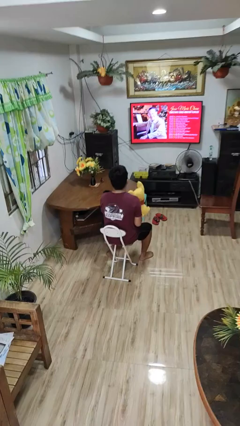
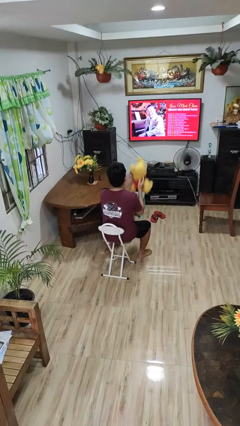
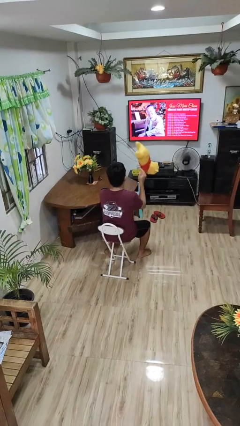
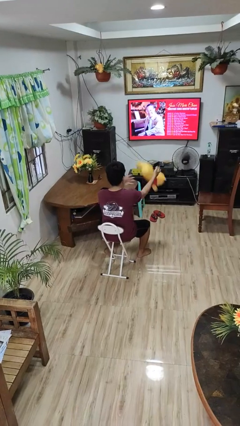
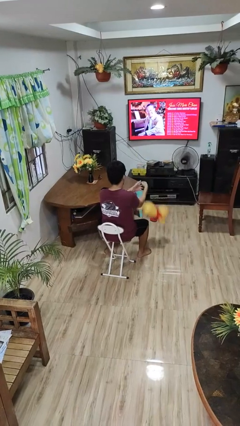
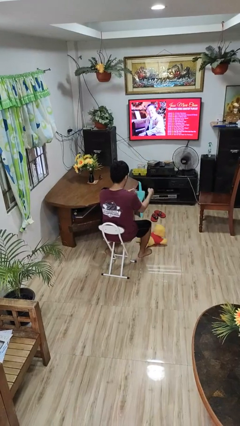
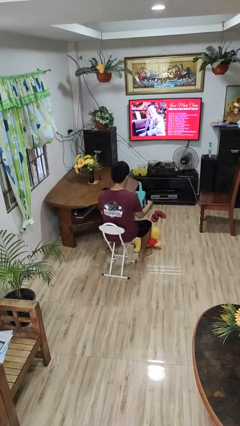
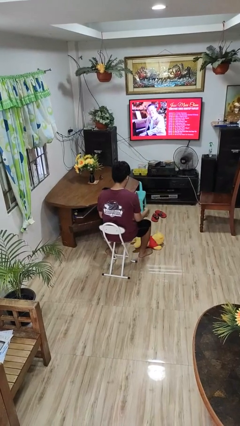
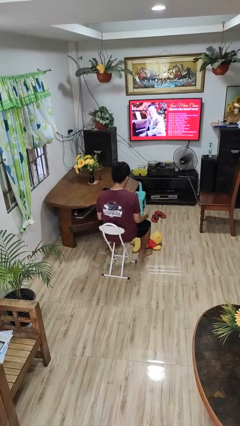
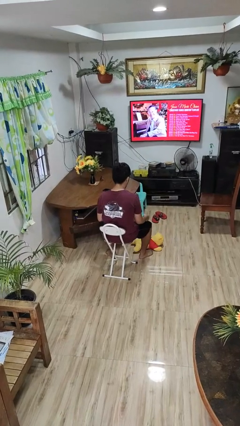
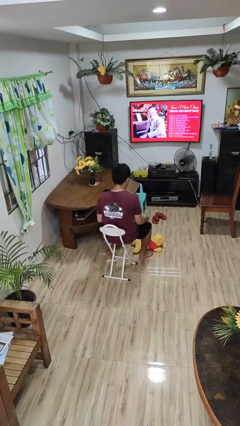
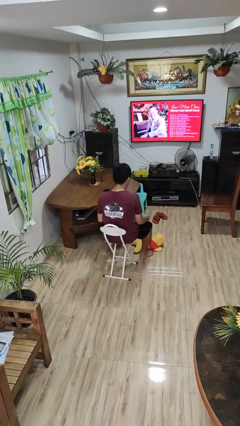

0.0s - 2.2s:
person drops object

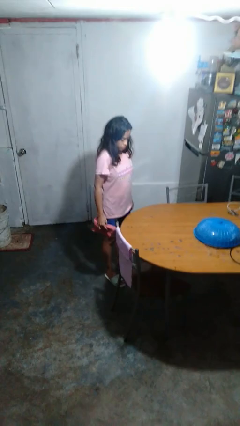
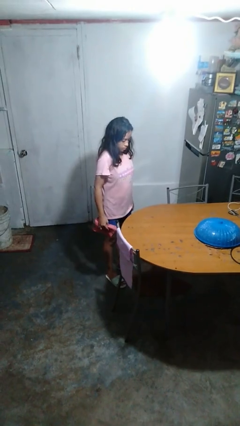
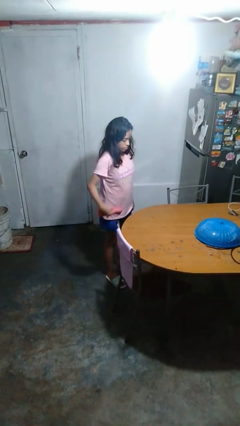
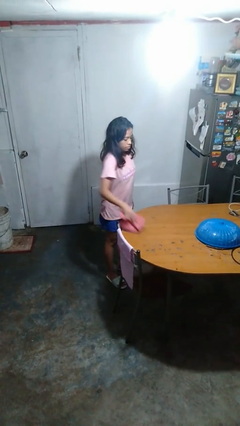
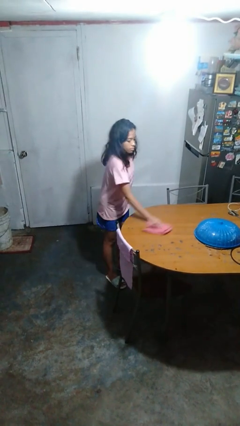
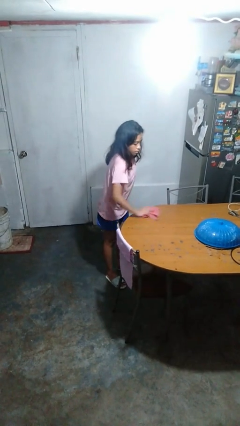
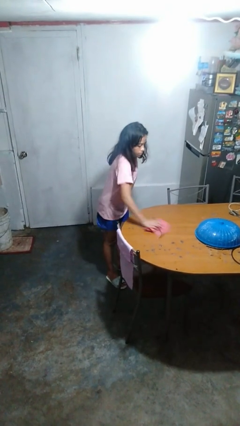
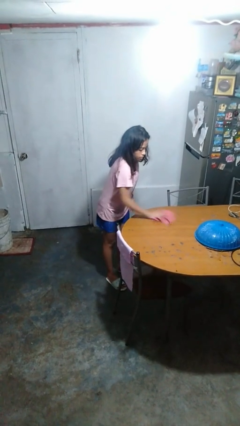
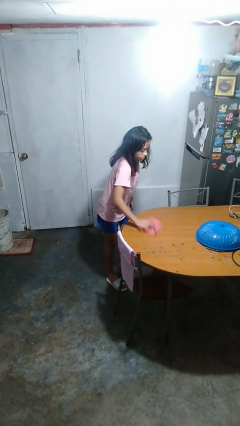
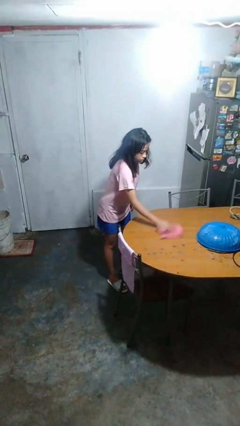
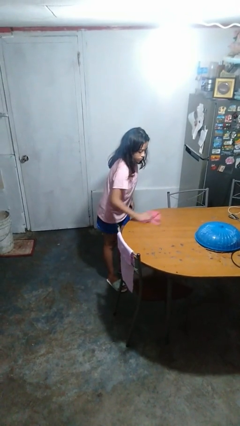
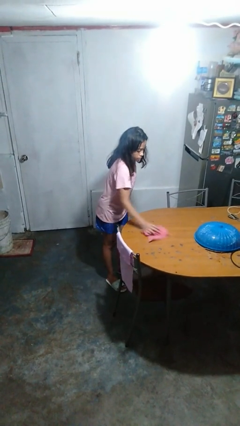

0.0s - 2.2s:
person cleans table with rag

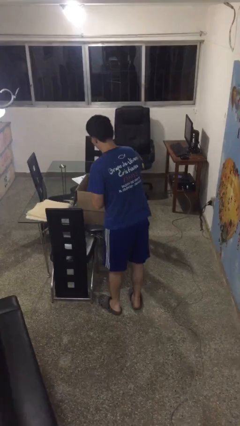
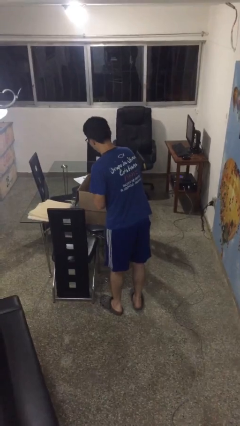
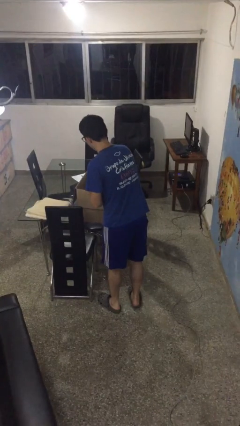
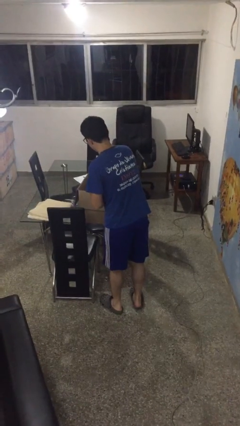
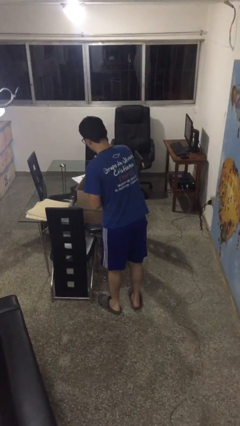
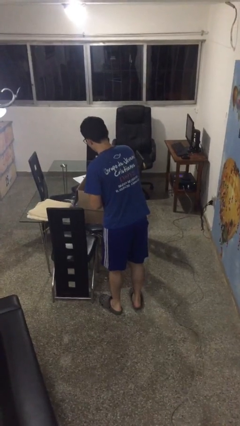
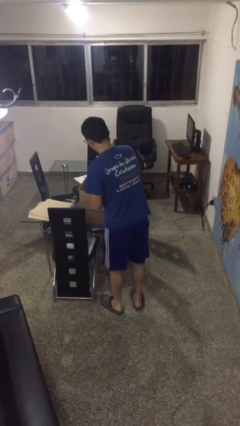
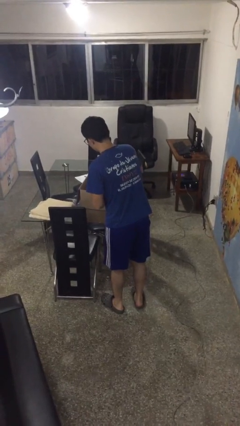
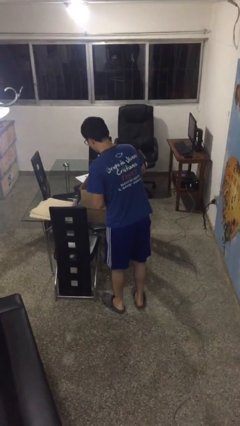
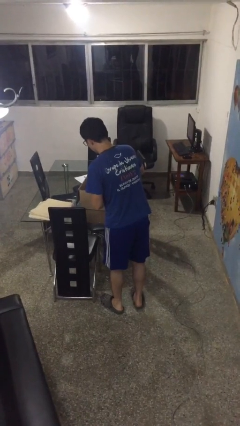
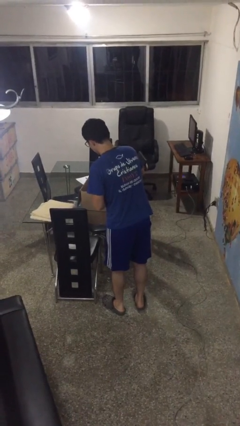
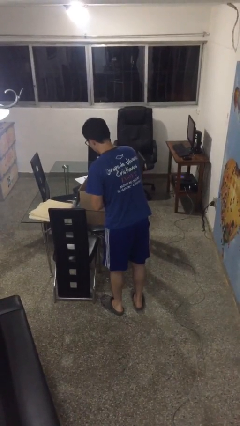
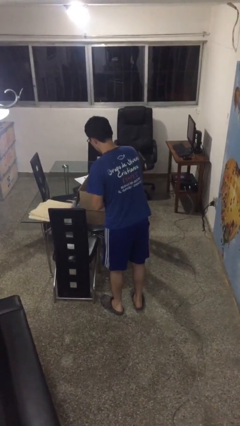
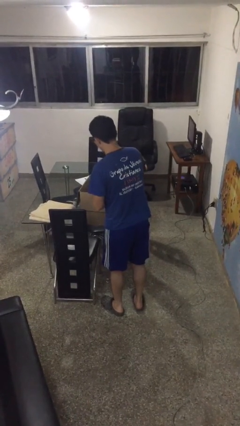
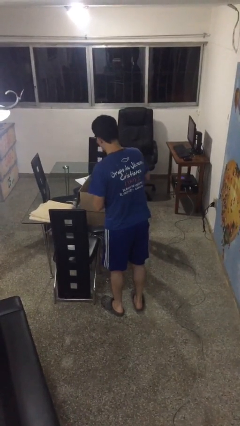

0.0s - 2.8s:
person searches in box

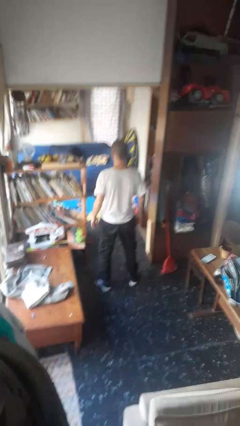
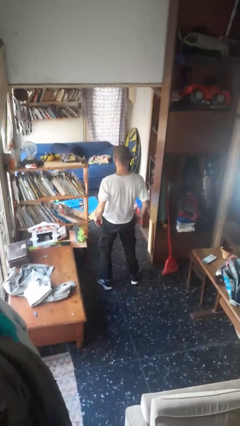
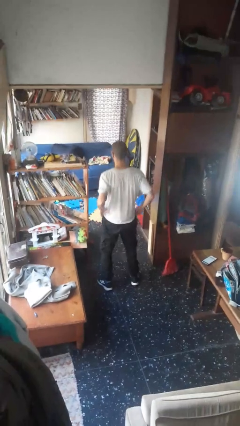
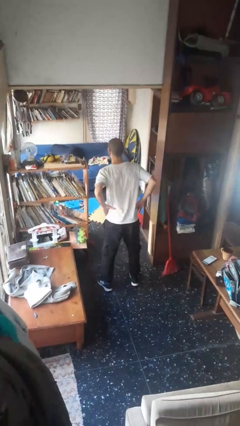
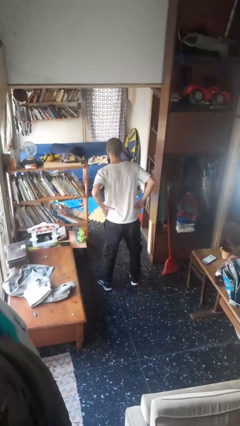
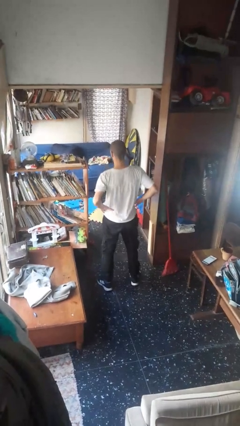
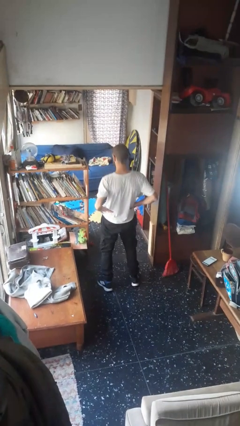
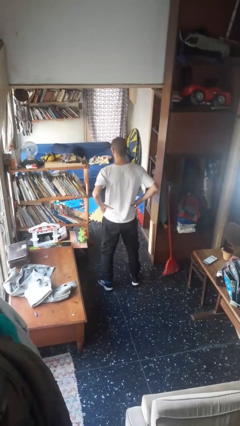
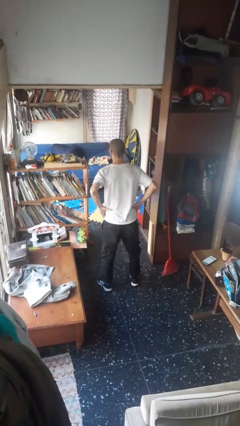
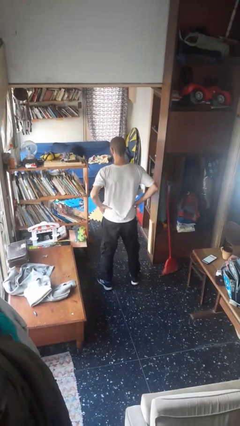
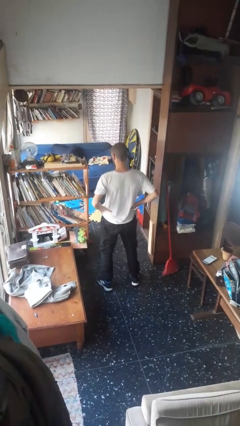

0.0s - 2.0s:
person wiggles hips

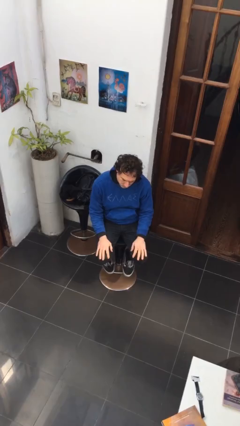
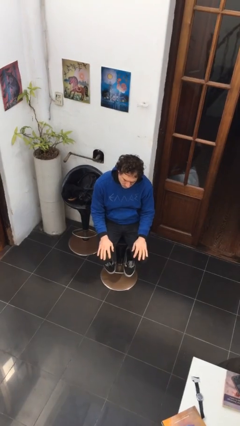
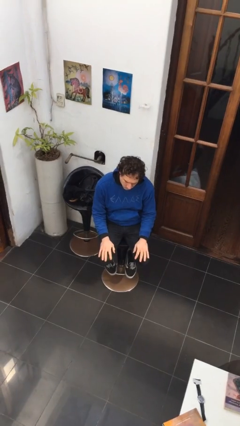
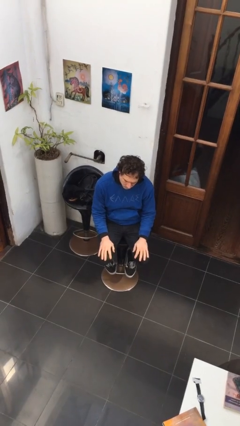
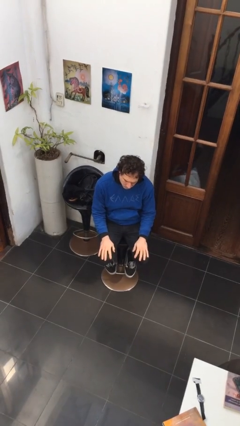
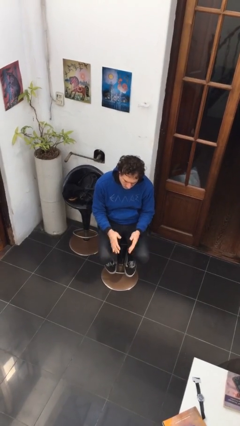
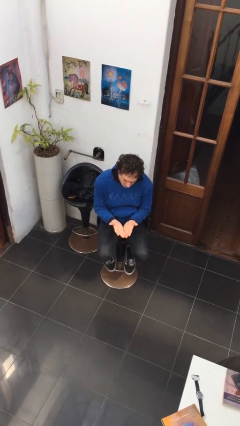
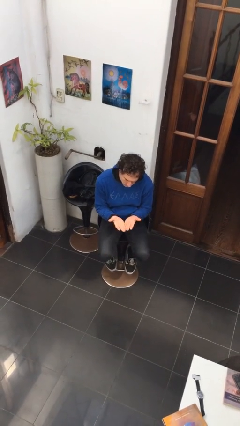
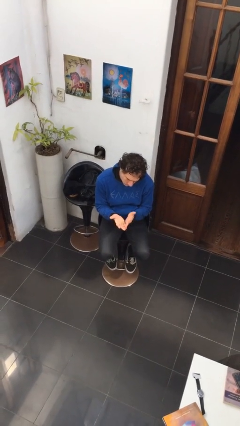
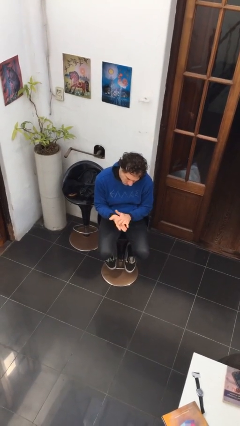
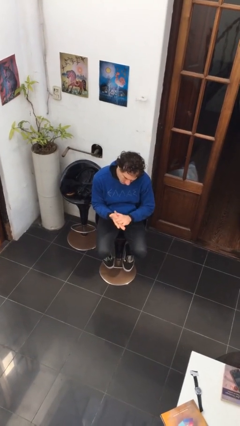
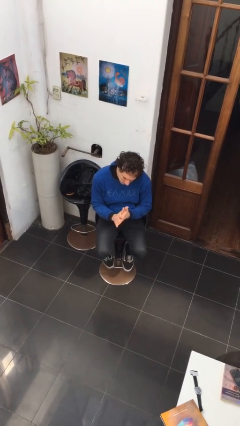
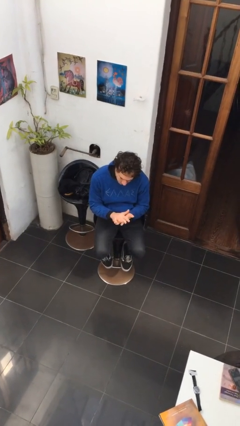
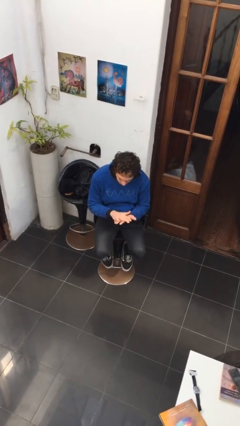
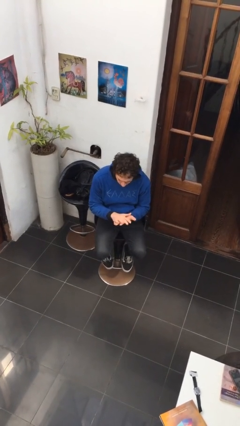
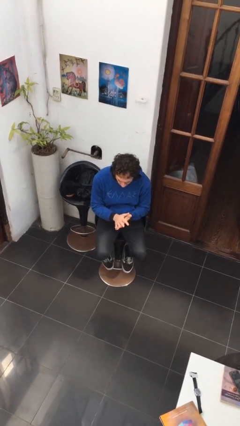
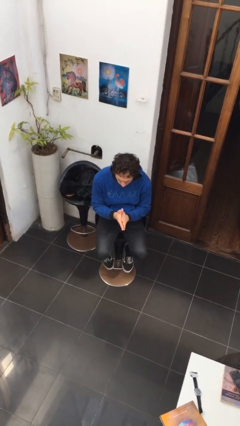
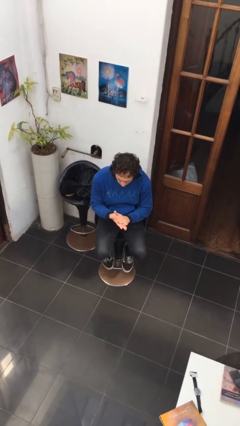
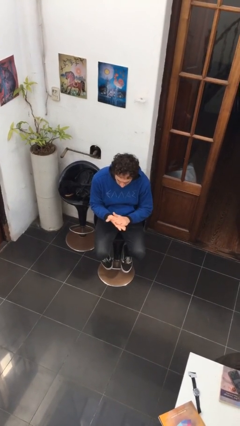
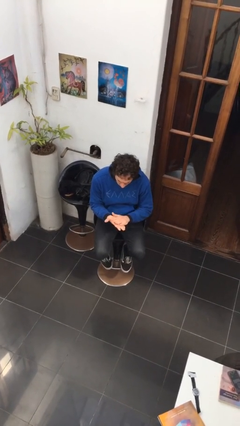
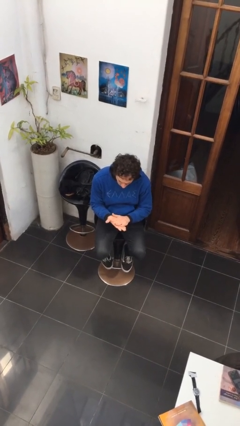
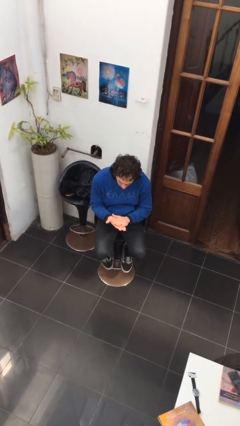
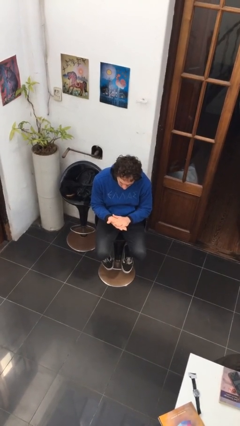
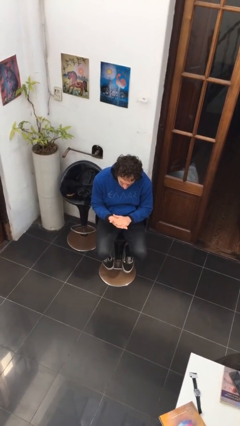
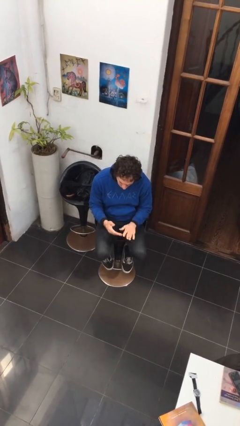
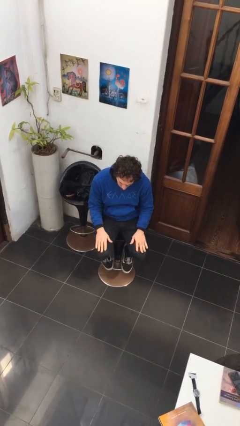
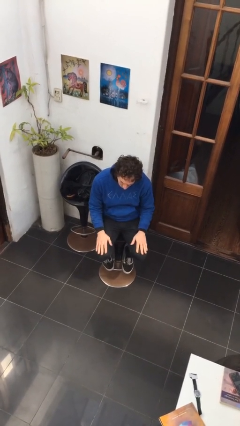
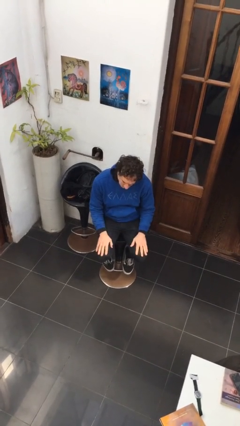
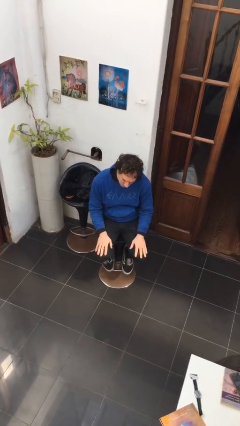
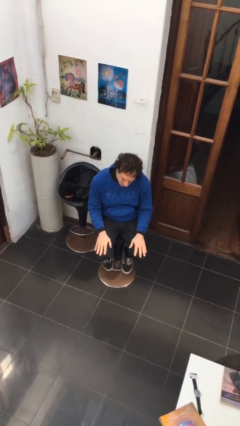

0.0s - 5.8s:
person looks at hands in lap

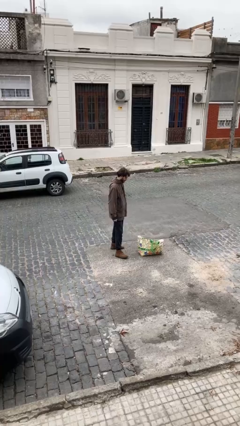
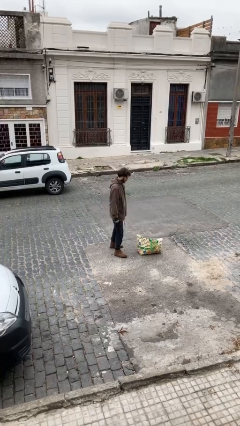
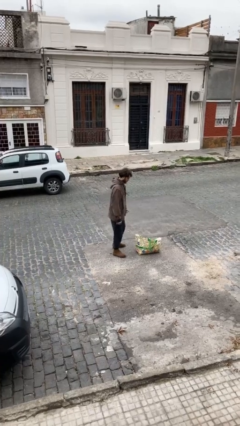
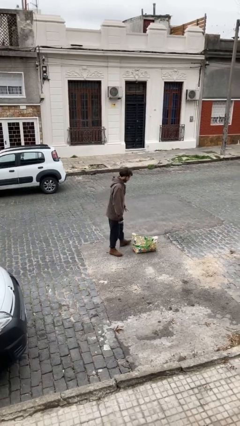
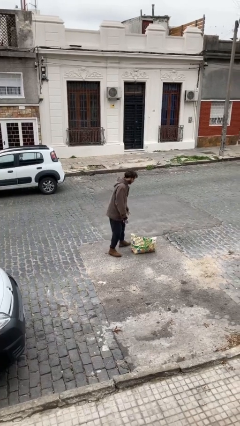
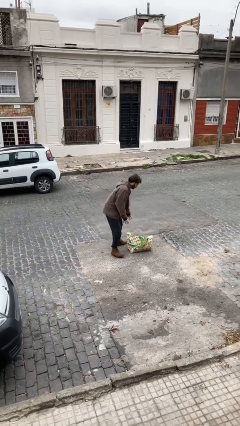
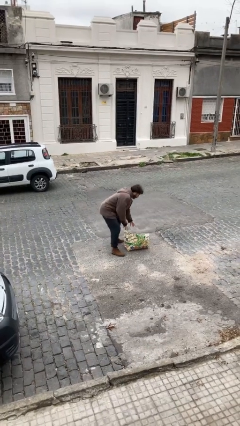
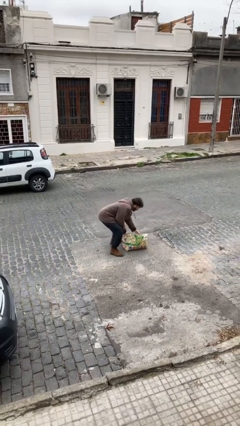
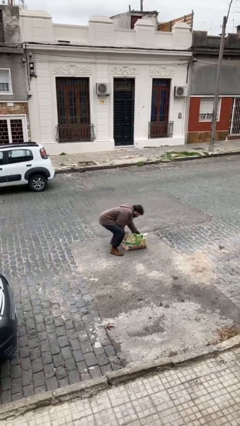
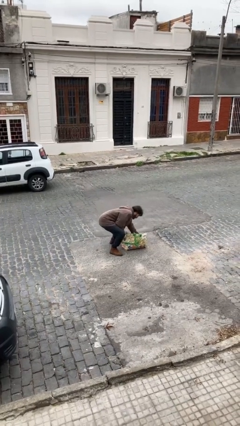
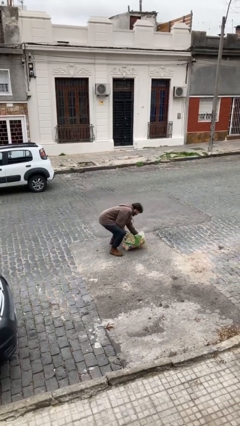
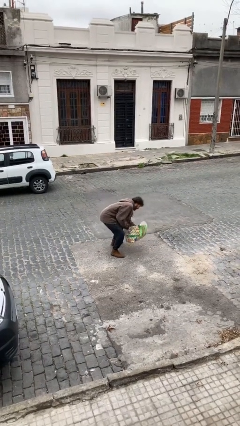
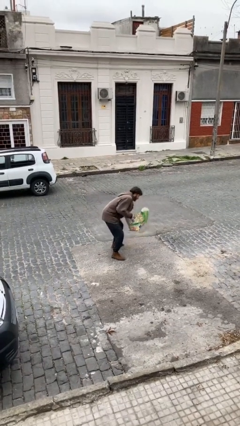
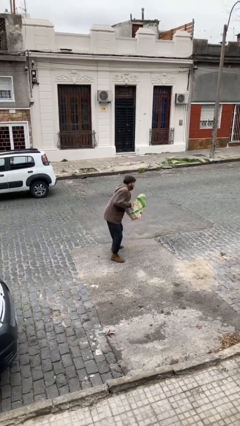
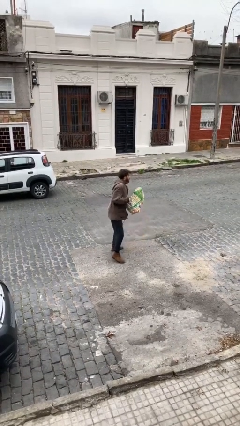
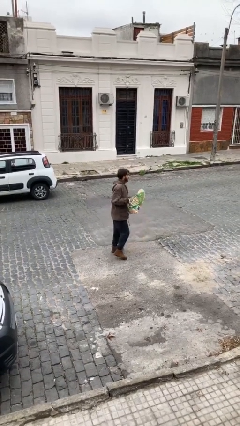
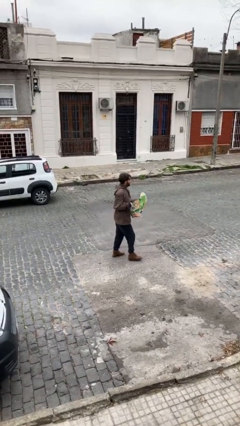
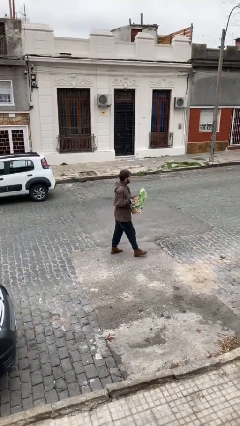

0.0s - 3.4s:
person picks up object from floor
